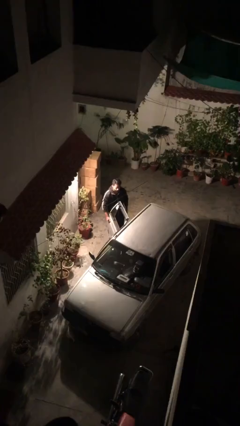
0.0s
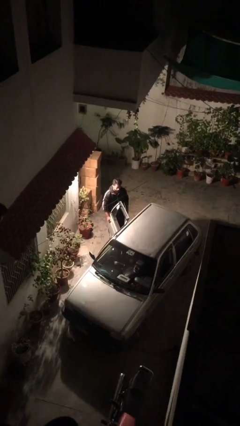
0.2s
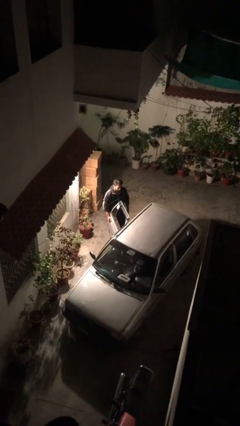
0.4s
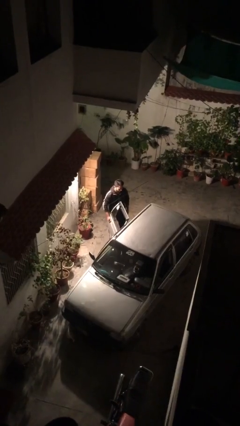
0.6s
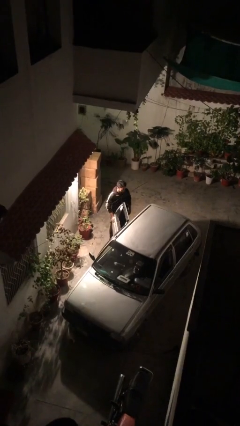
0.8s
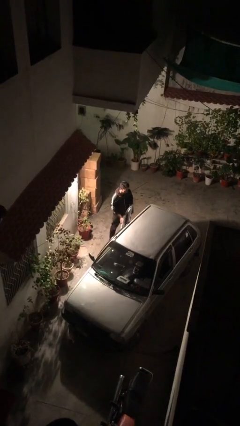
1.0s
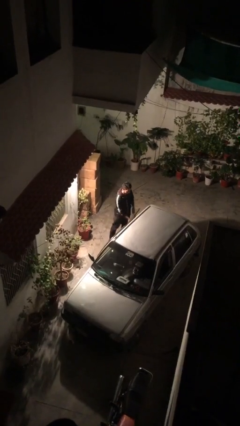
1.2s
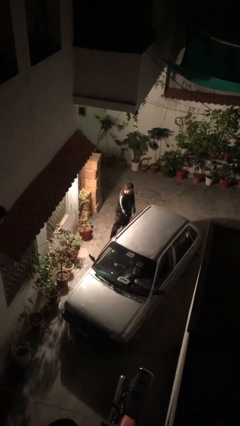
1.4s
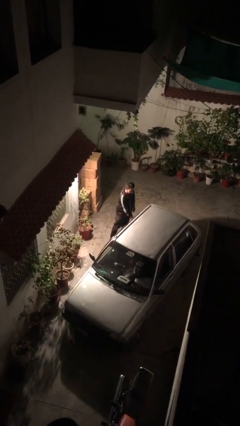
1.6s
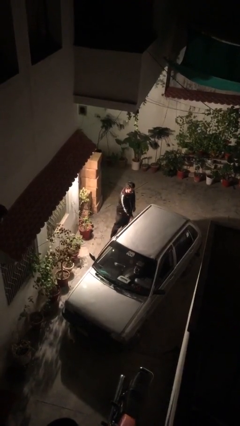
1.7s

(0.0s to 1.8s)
person closes car door

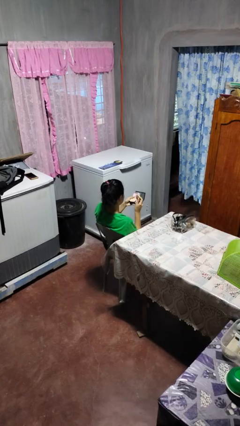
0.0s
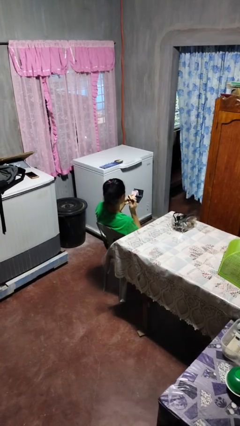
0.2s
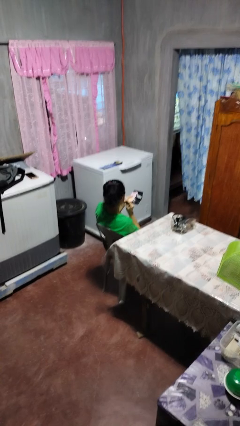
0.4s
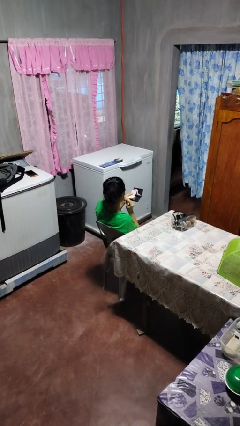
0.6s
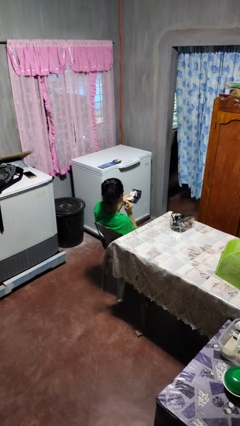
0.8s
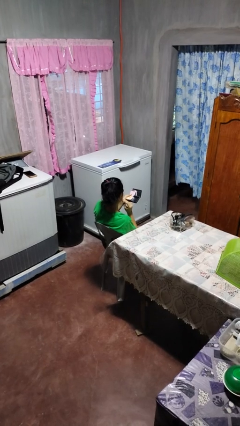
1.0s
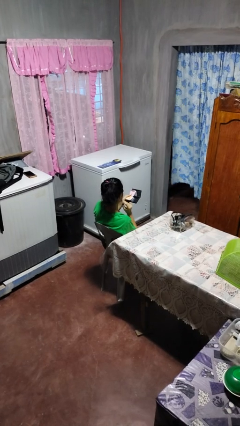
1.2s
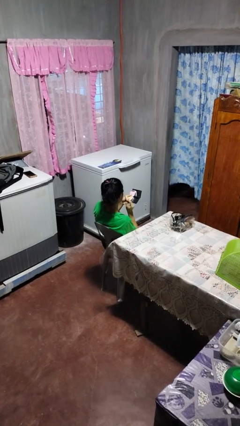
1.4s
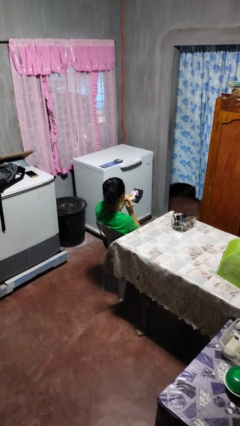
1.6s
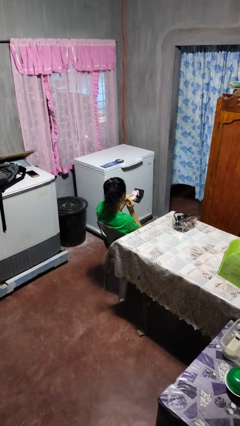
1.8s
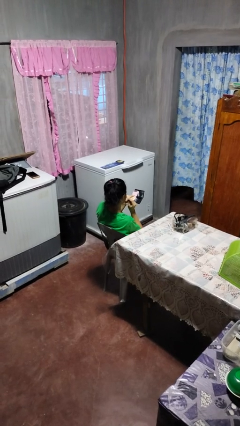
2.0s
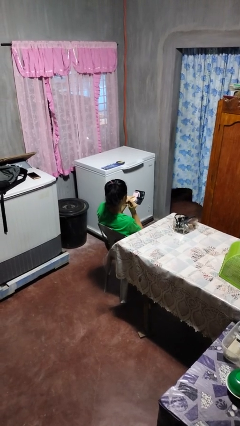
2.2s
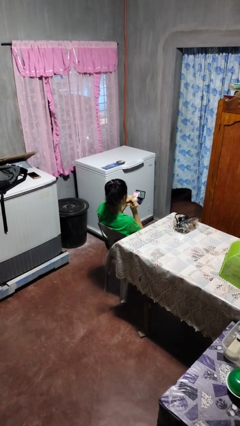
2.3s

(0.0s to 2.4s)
person applies foundation makeup

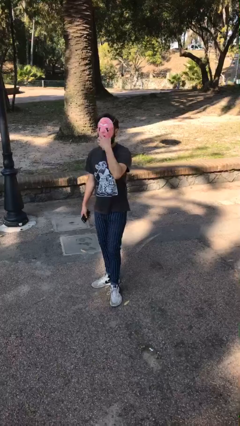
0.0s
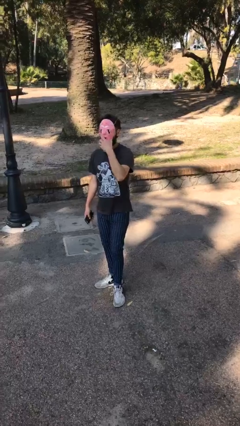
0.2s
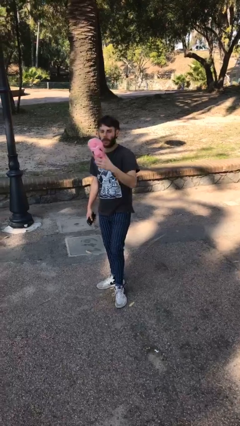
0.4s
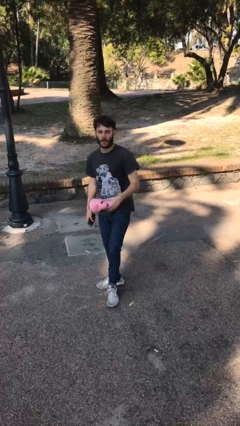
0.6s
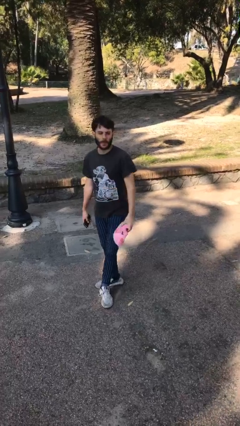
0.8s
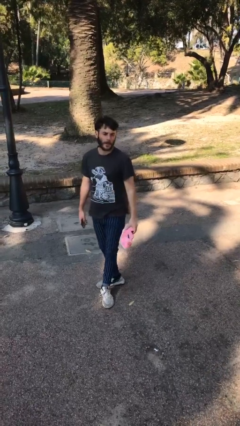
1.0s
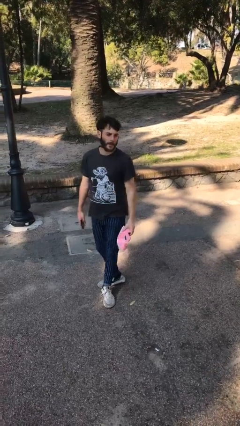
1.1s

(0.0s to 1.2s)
person takes off facemask

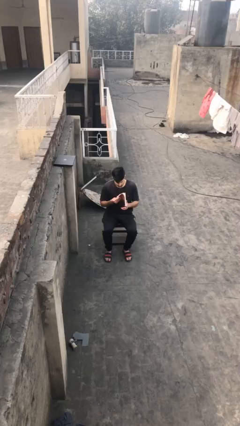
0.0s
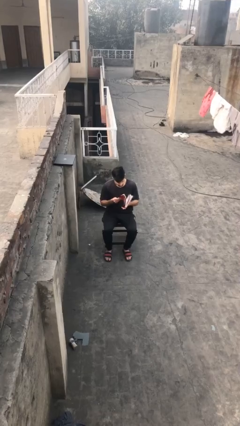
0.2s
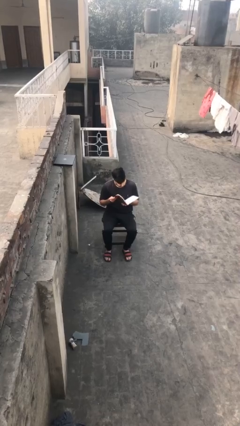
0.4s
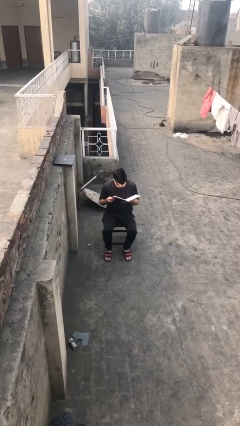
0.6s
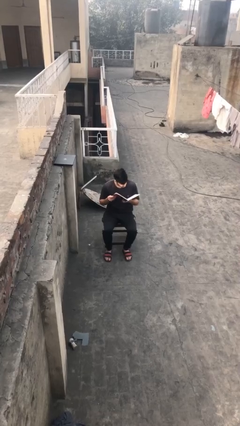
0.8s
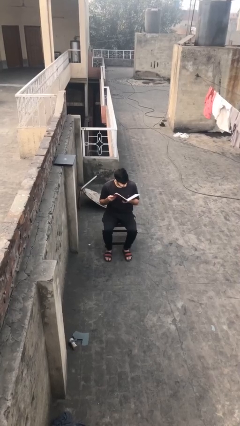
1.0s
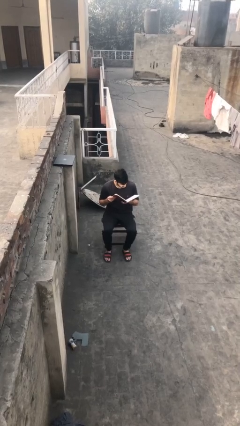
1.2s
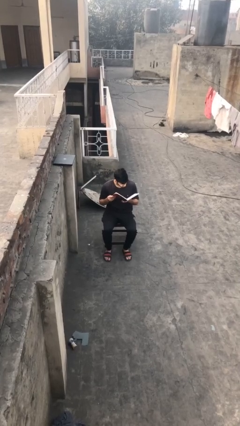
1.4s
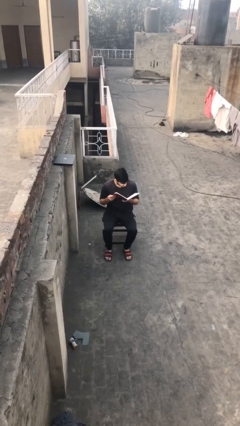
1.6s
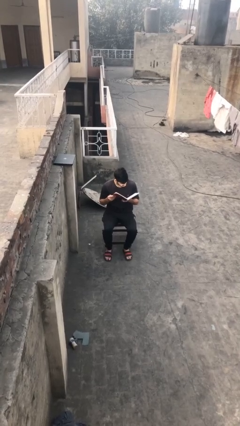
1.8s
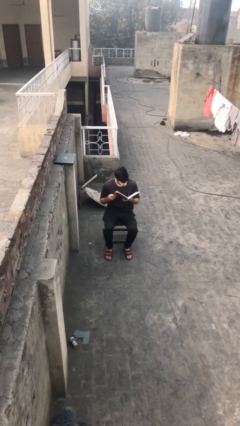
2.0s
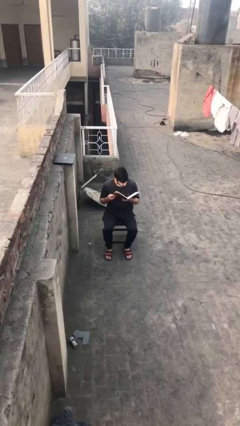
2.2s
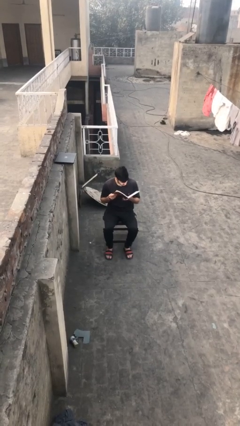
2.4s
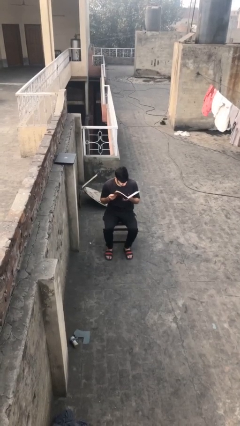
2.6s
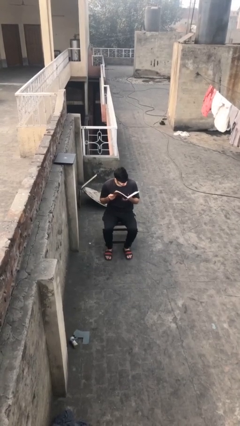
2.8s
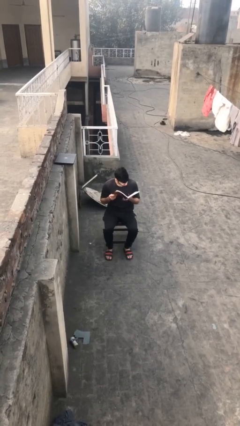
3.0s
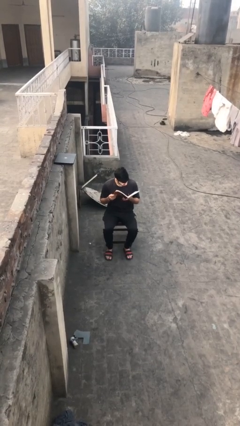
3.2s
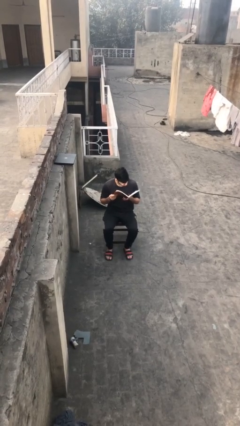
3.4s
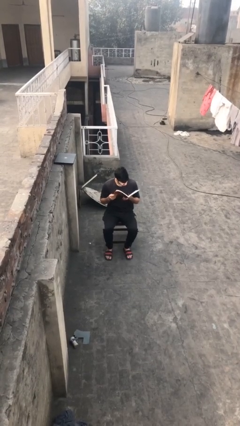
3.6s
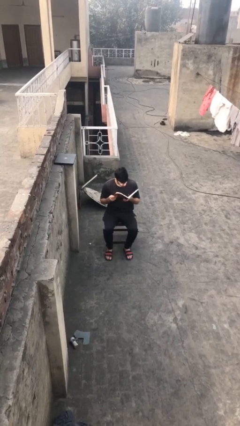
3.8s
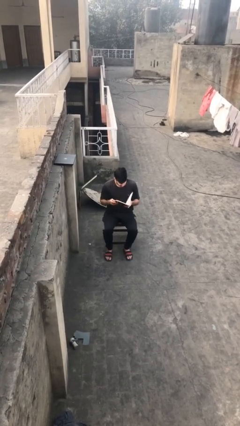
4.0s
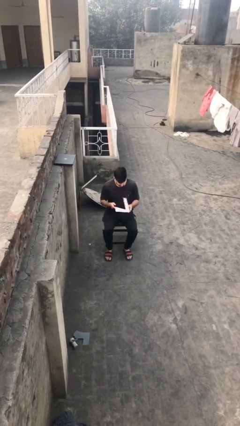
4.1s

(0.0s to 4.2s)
person reads document

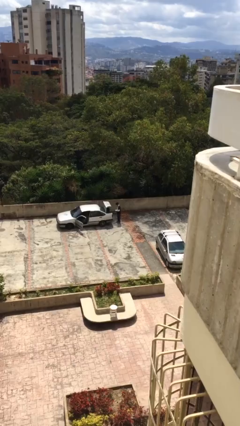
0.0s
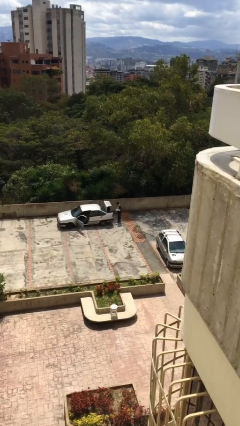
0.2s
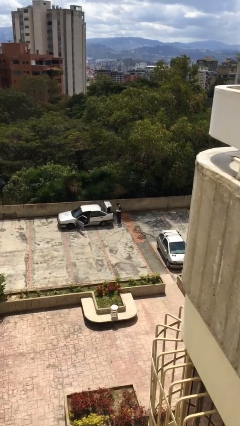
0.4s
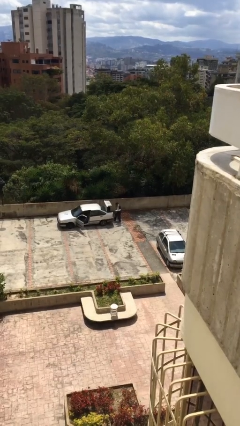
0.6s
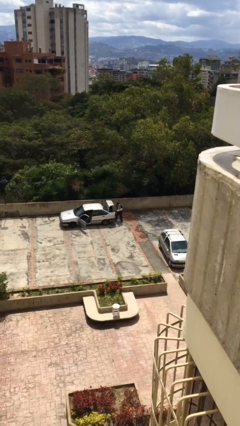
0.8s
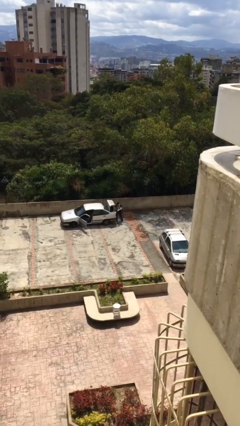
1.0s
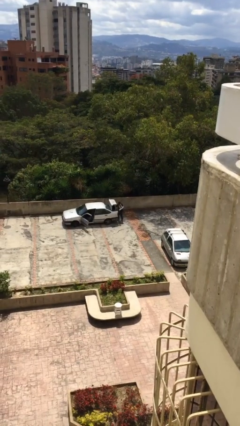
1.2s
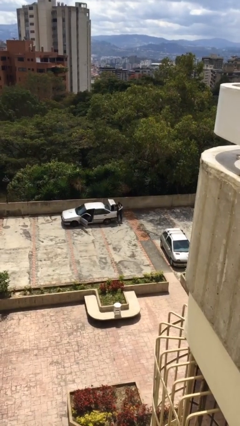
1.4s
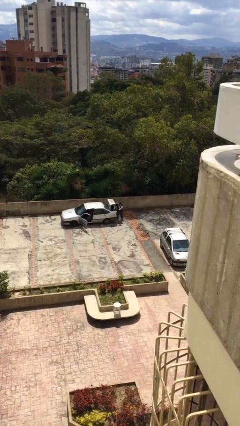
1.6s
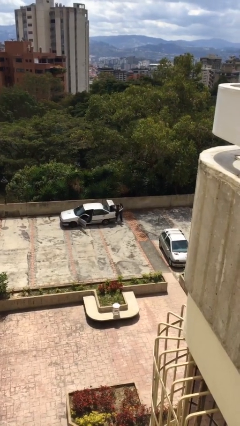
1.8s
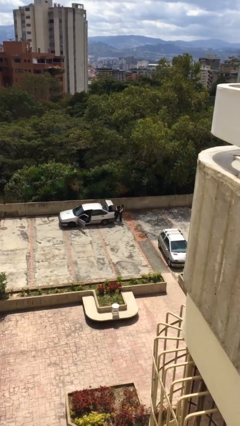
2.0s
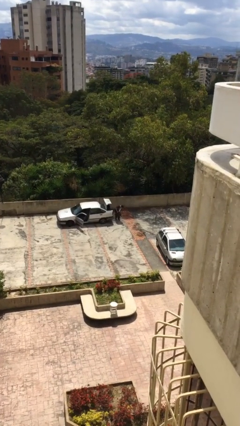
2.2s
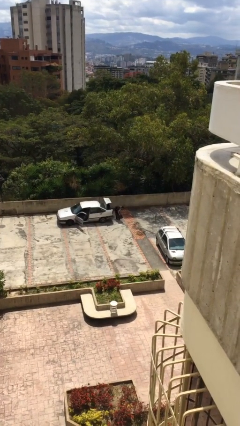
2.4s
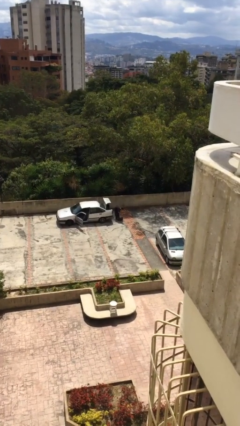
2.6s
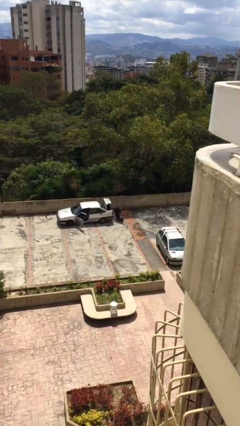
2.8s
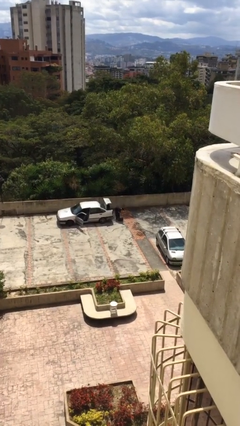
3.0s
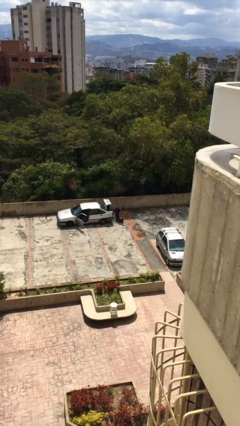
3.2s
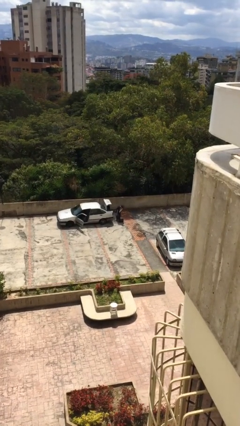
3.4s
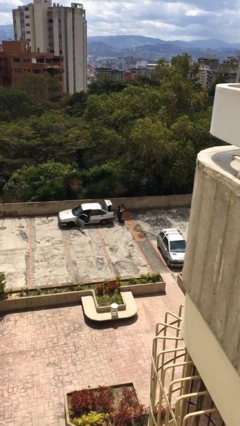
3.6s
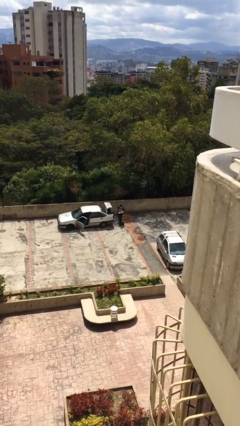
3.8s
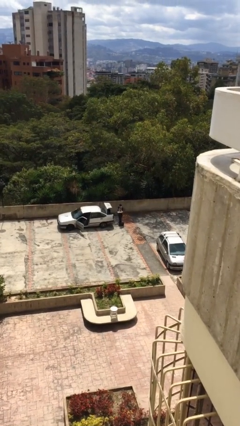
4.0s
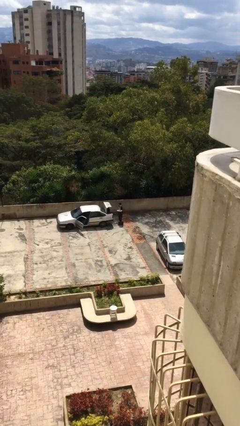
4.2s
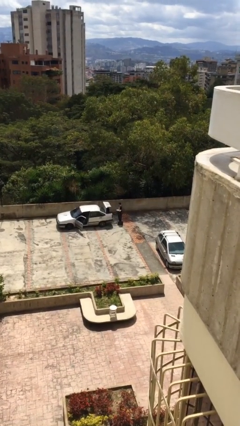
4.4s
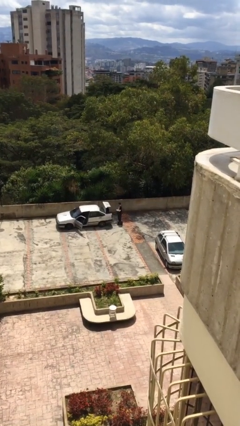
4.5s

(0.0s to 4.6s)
person unloads car

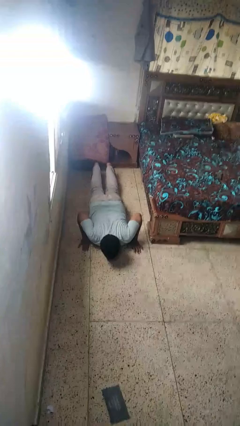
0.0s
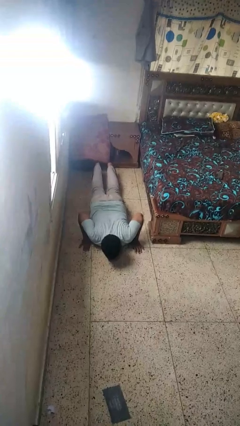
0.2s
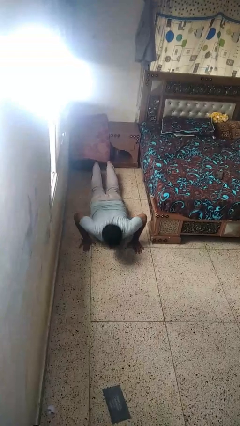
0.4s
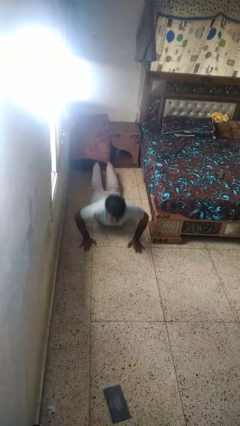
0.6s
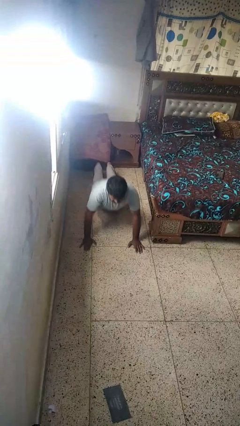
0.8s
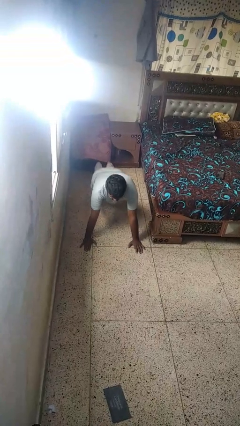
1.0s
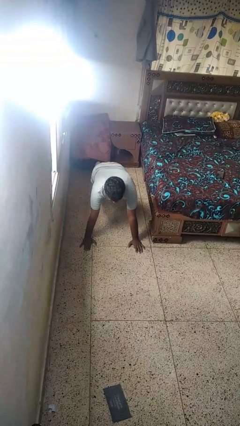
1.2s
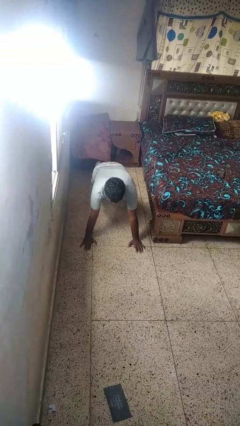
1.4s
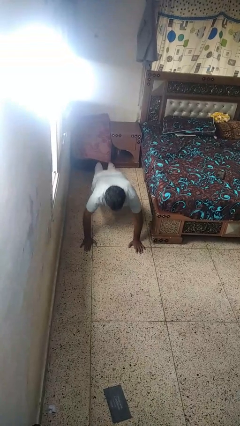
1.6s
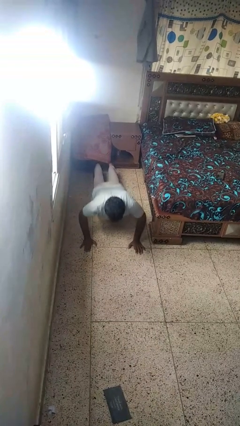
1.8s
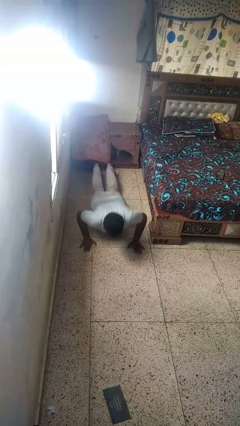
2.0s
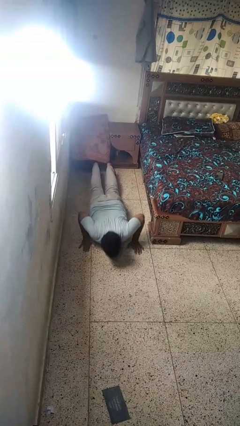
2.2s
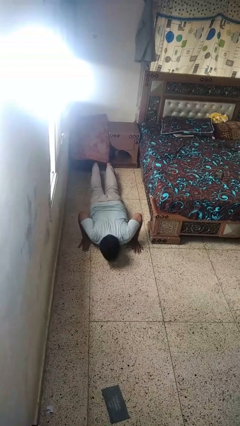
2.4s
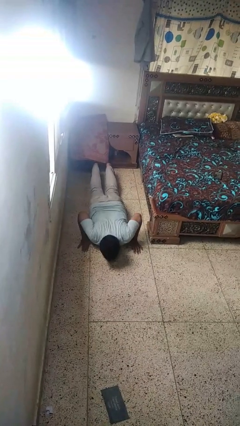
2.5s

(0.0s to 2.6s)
person exercises with pushup

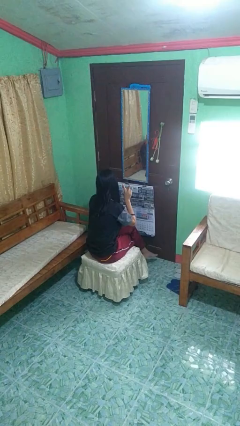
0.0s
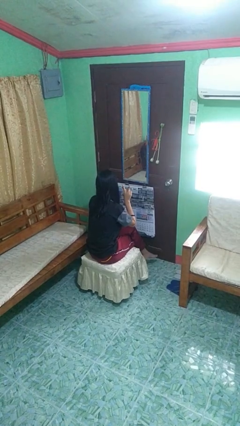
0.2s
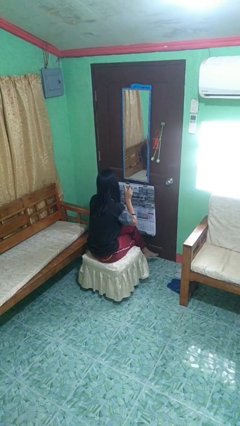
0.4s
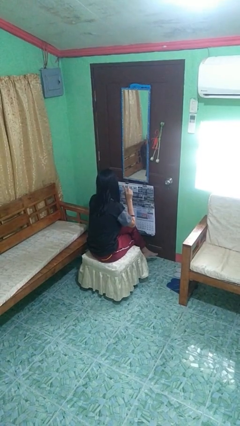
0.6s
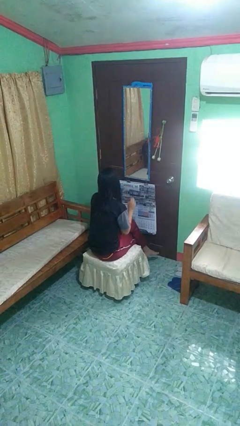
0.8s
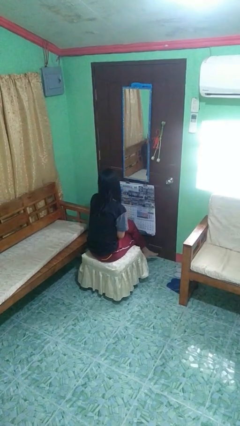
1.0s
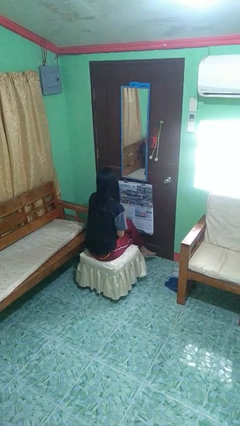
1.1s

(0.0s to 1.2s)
person gestures peace
